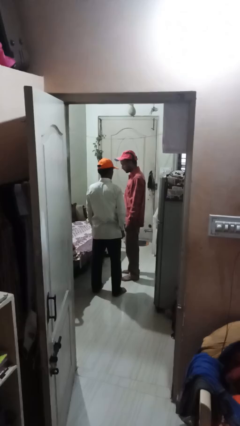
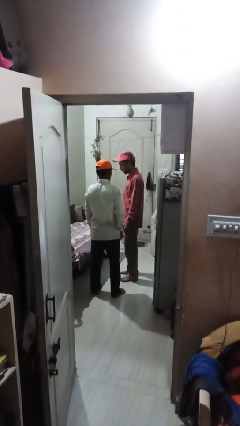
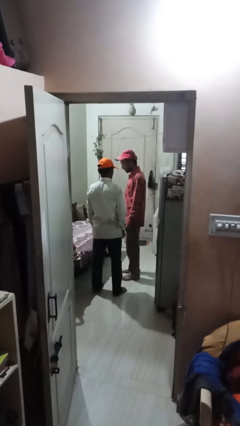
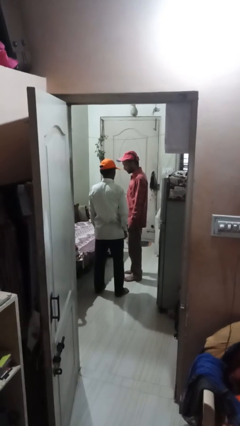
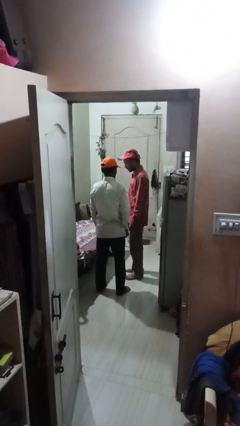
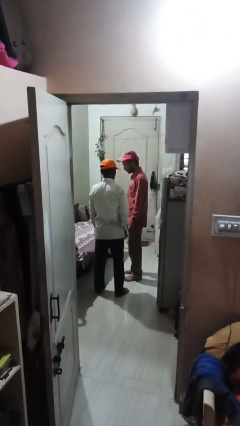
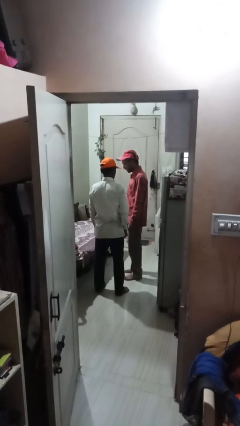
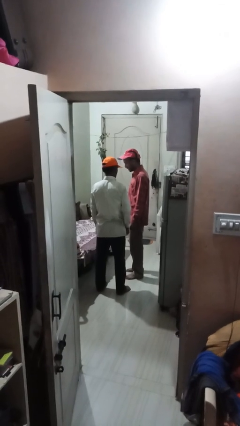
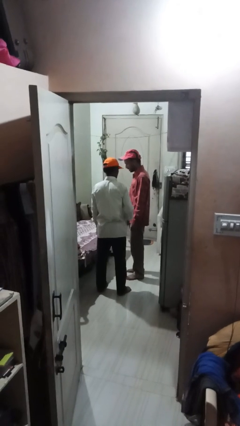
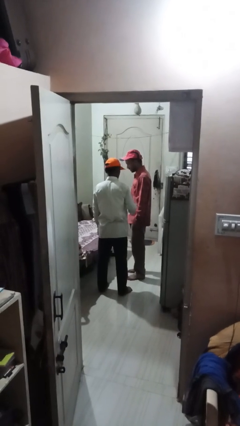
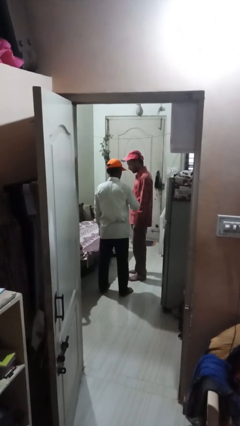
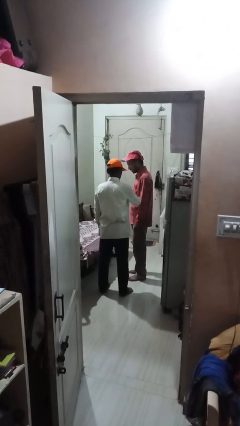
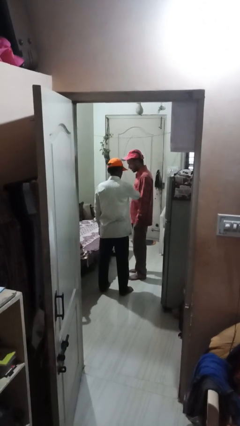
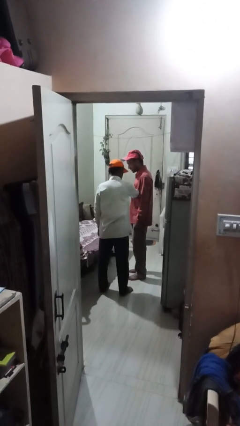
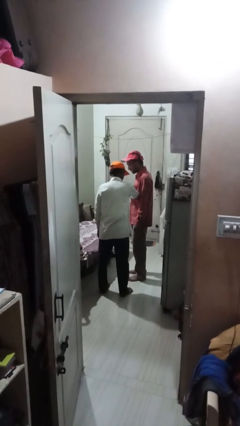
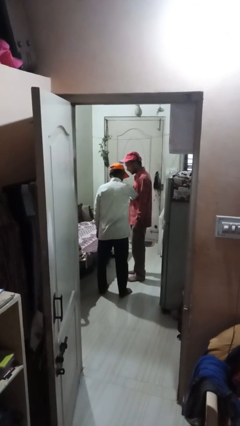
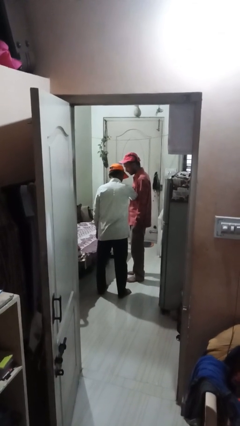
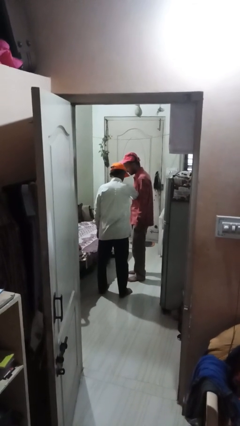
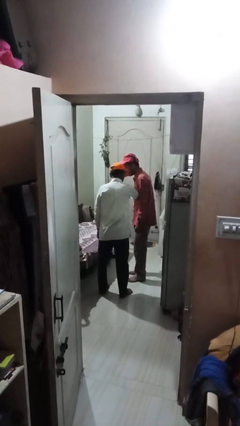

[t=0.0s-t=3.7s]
person nudges person with elbow

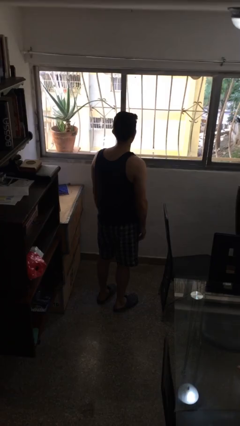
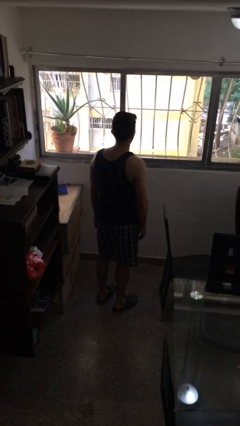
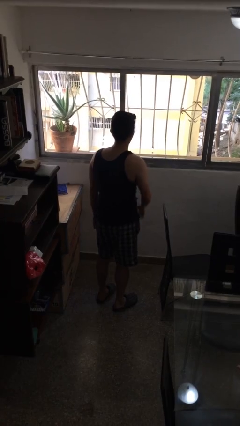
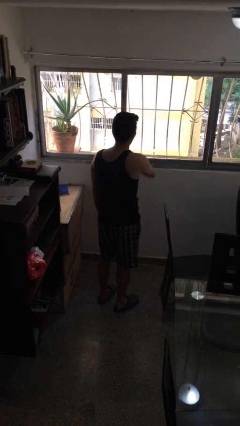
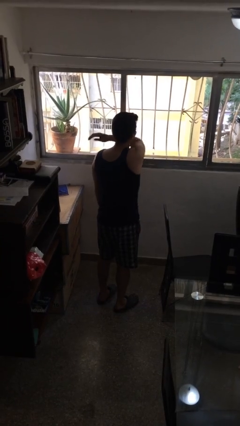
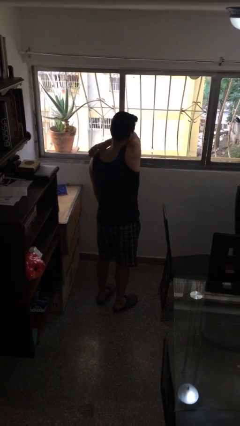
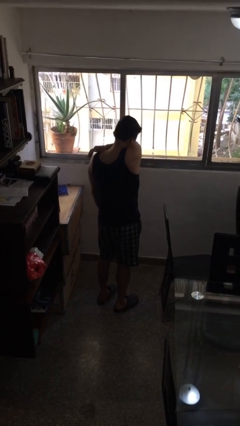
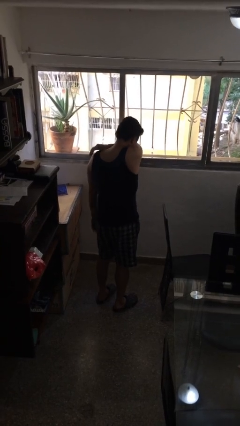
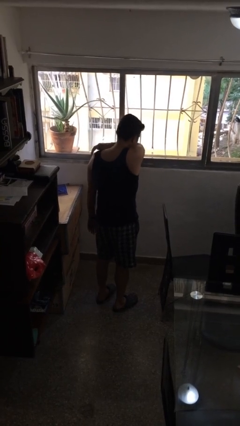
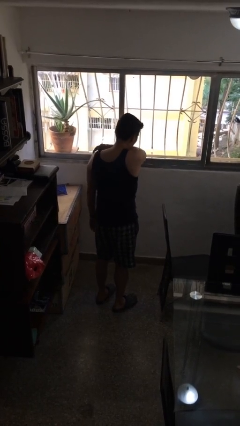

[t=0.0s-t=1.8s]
person sneezes into arm

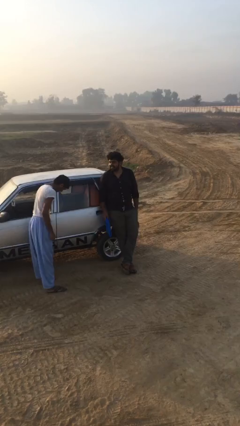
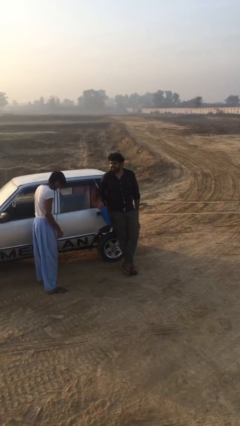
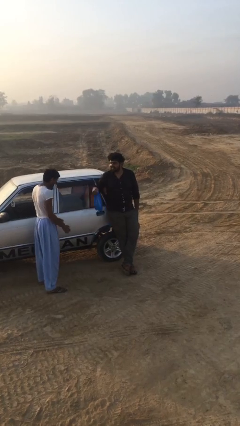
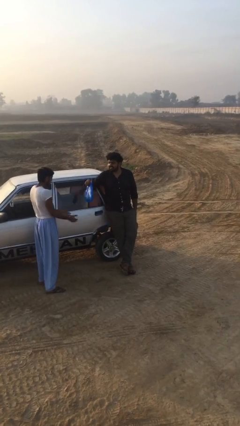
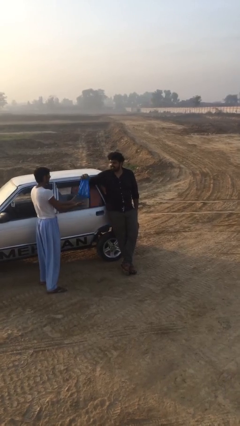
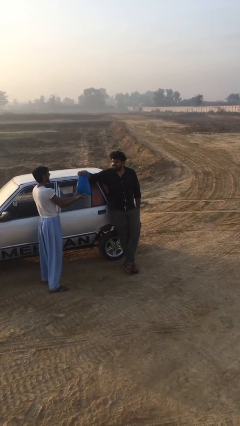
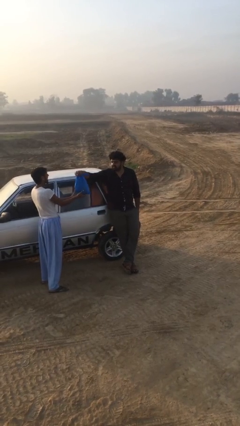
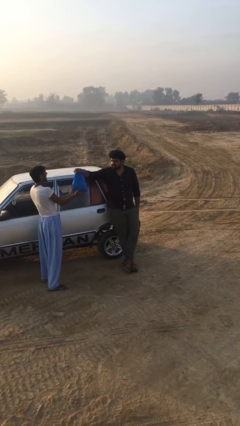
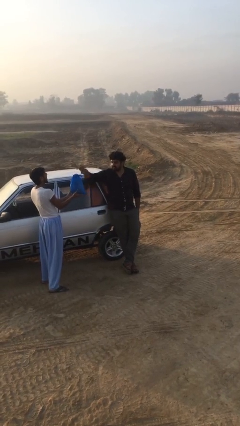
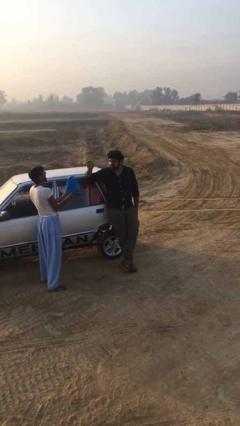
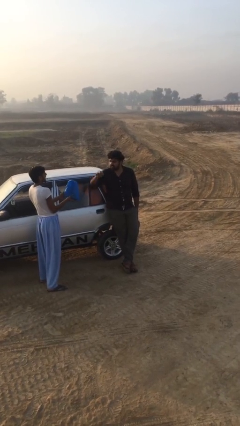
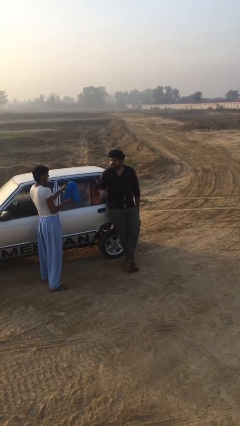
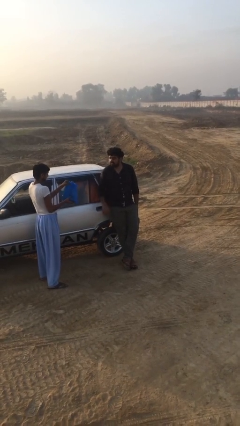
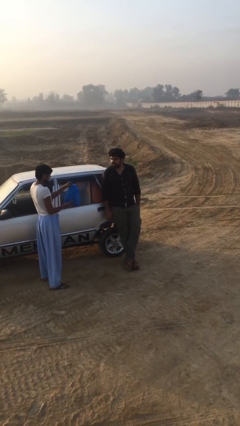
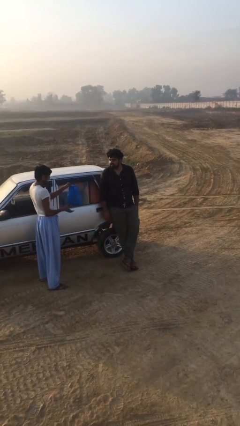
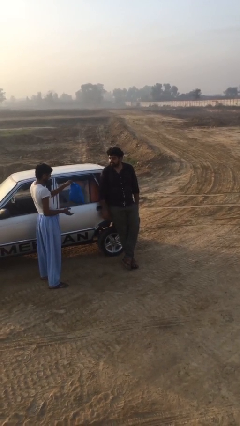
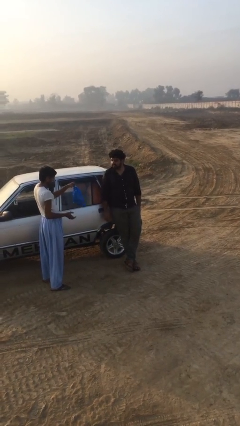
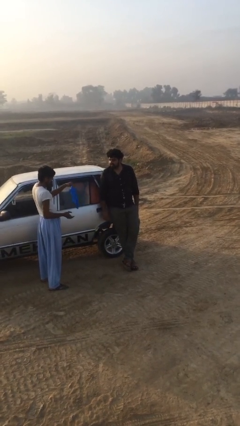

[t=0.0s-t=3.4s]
person transfers object to person

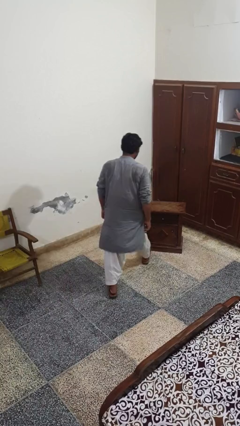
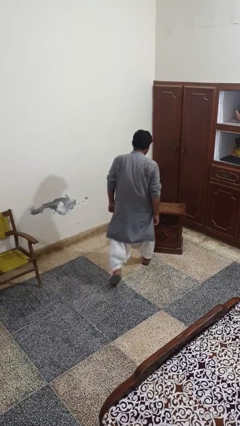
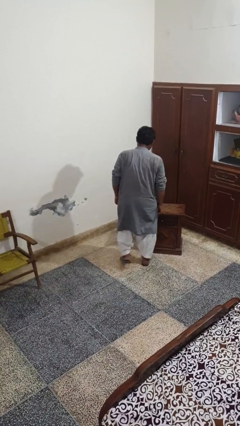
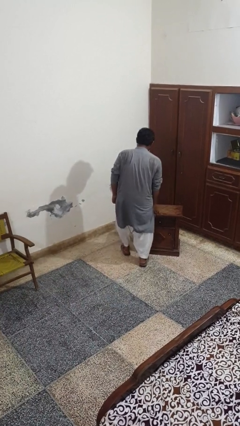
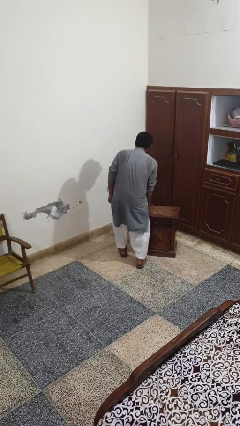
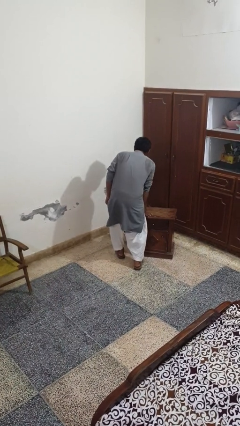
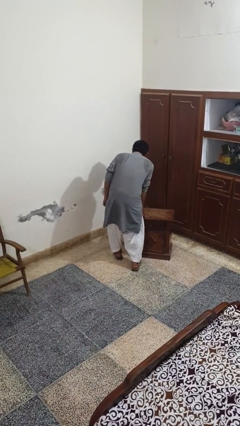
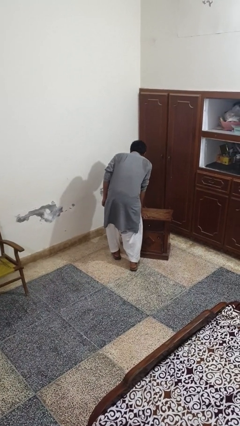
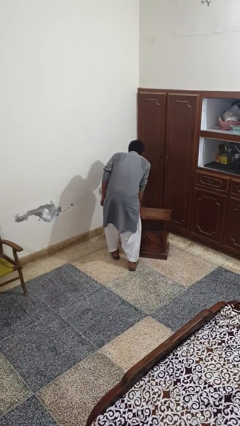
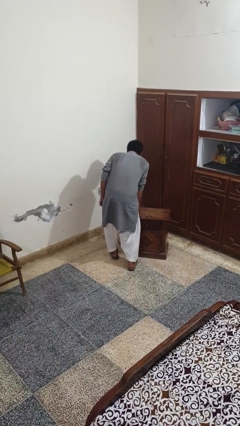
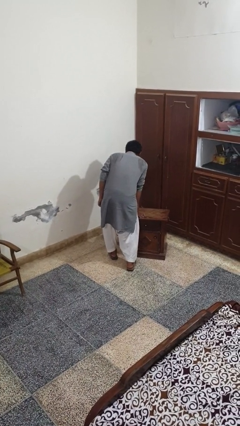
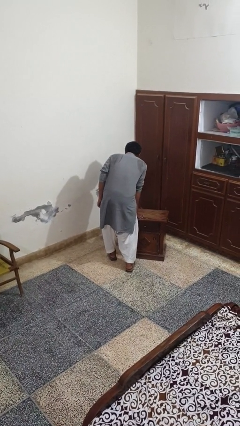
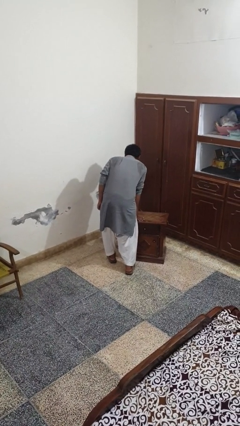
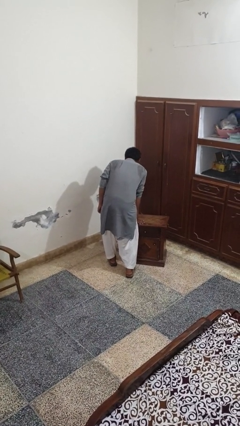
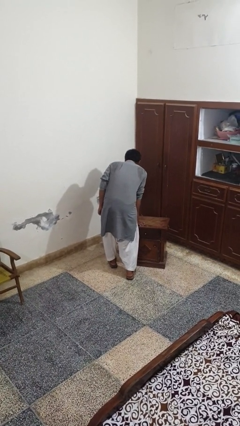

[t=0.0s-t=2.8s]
person bumps into table

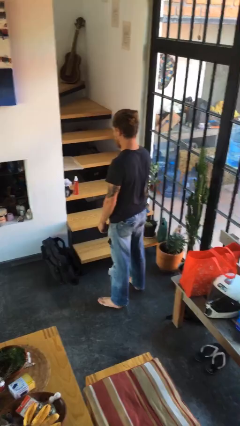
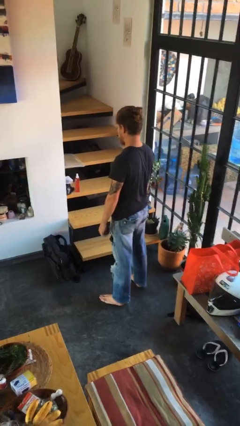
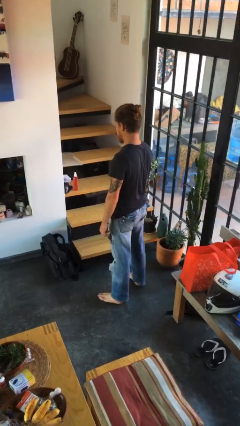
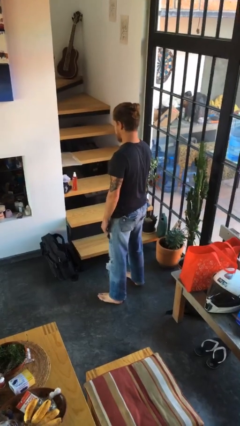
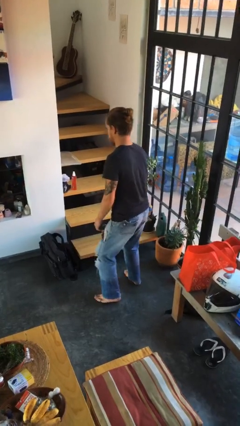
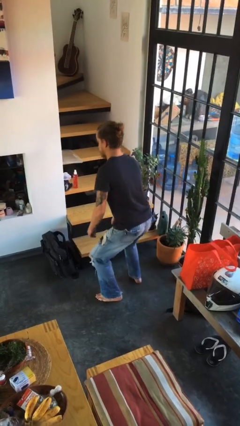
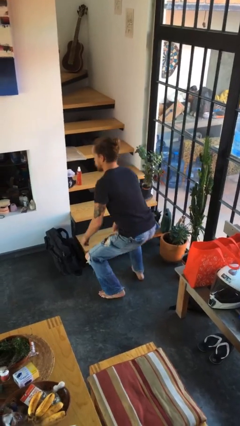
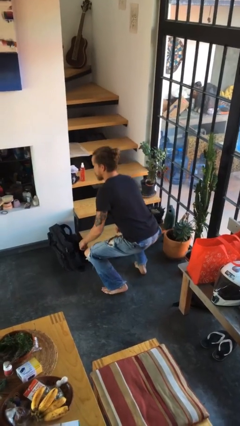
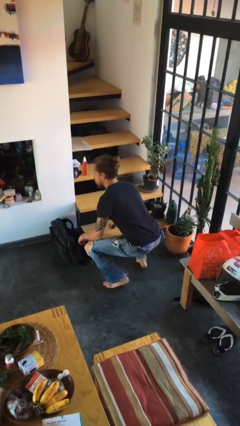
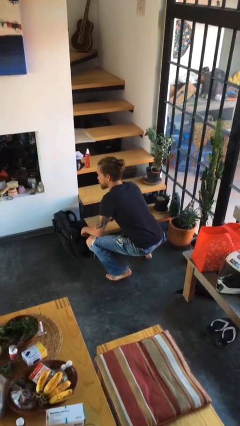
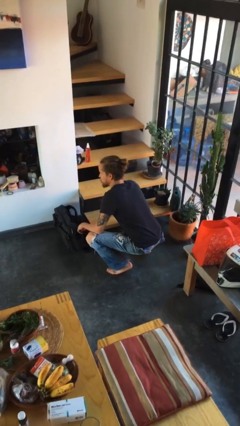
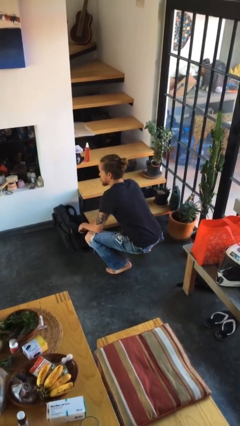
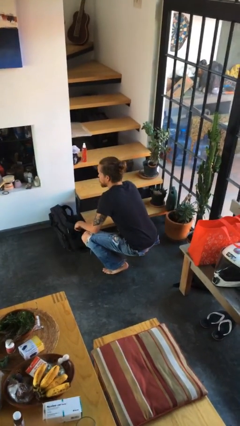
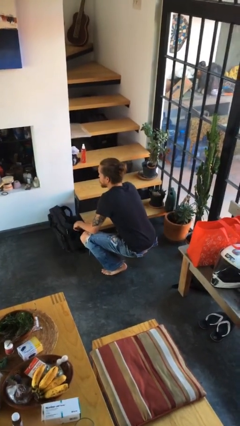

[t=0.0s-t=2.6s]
person squats

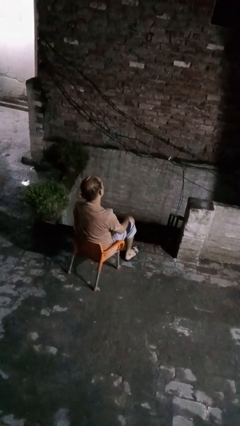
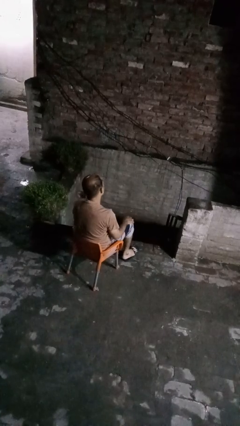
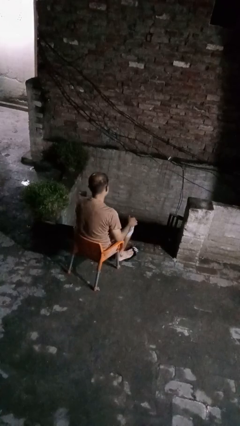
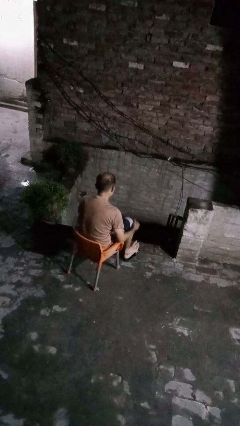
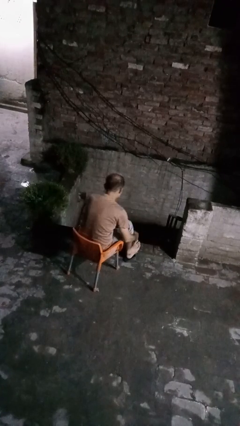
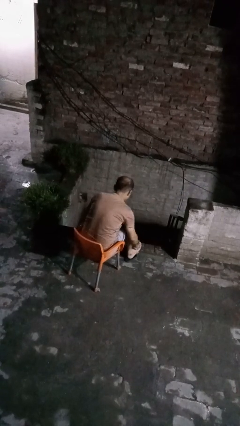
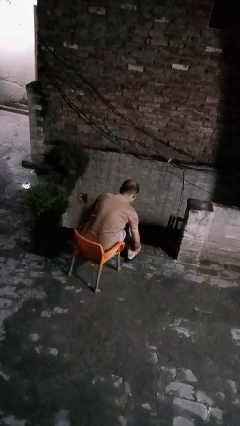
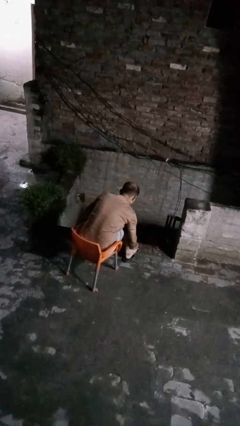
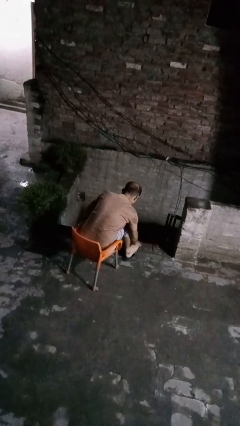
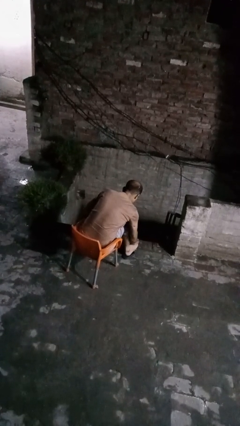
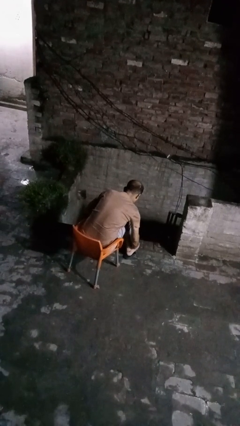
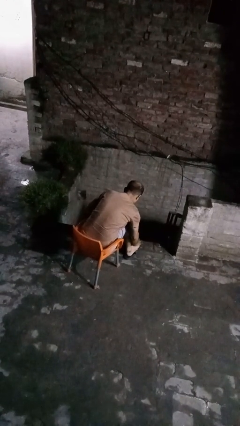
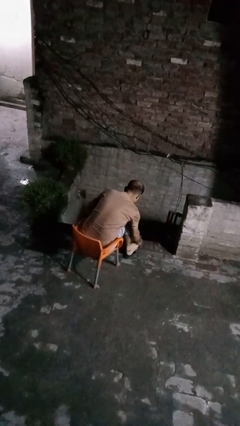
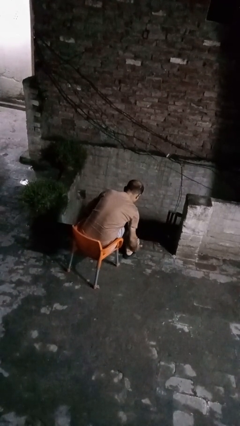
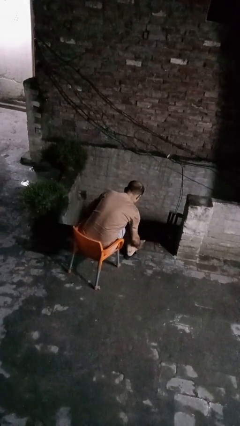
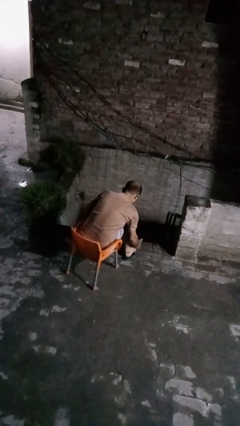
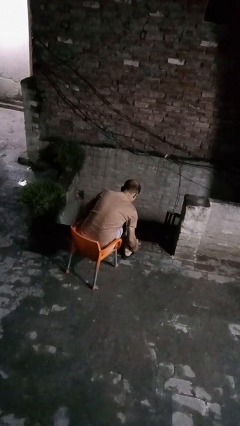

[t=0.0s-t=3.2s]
person rubs foot
